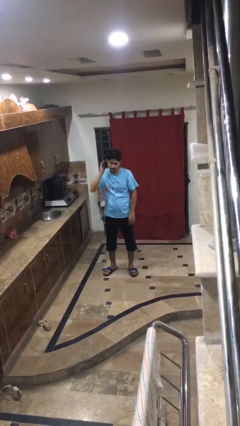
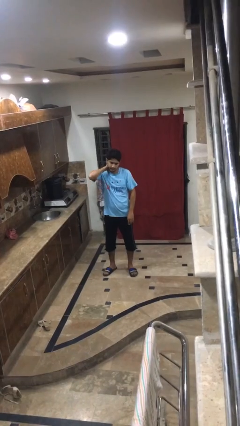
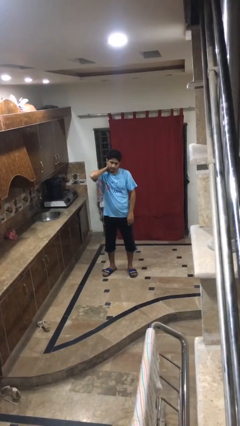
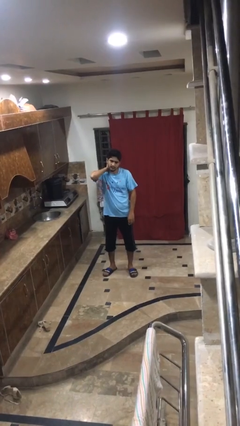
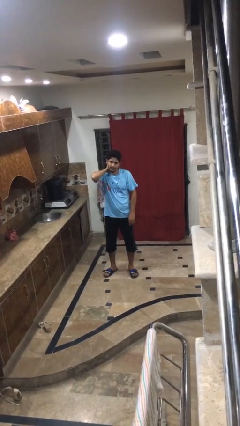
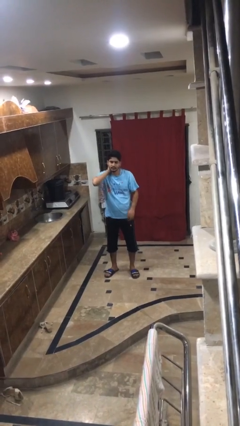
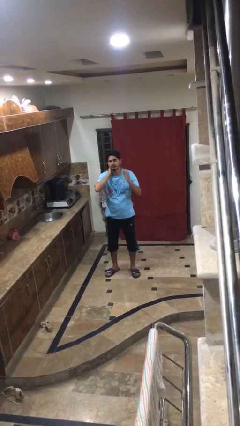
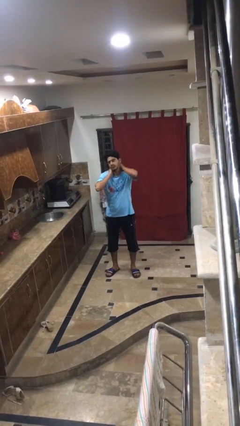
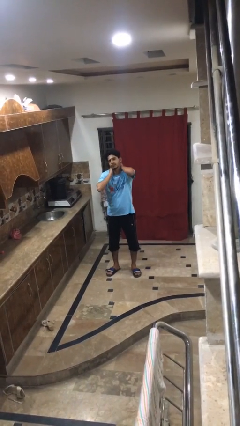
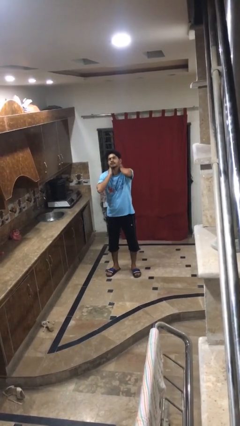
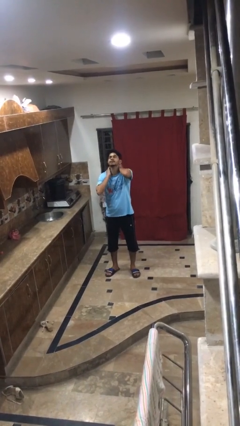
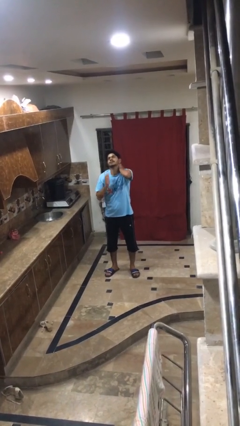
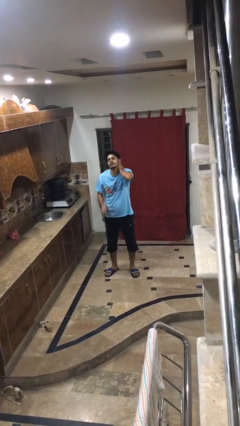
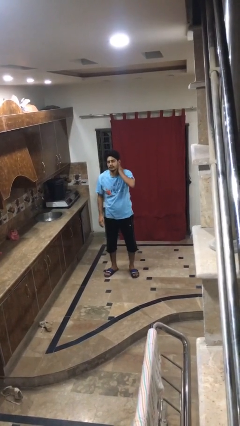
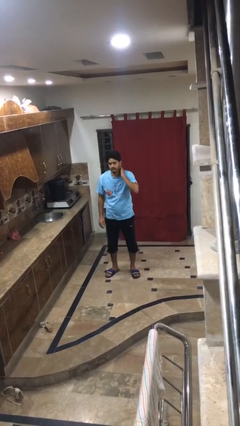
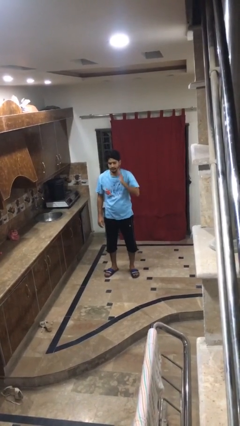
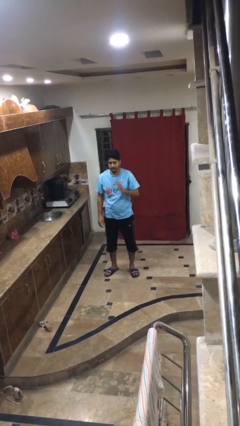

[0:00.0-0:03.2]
person rubs neck

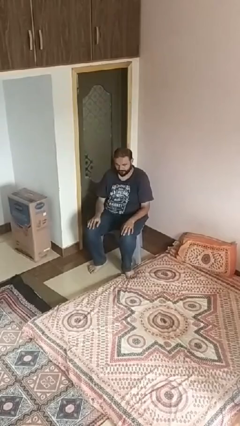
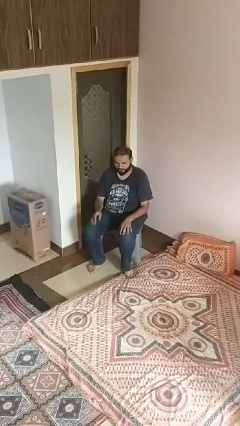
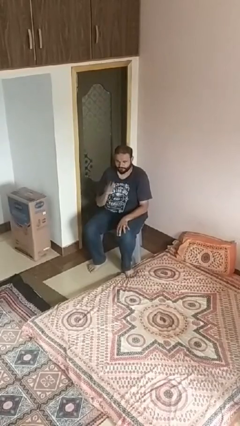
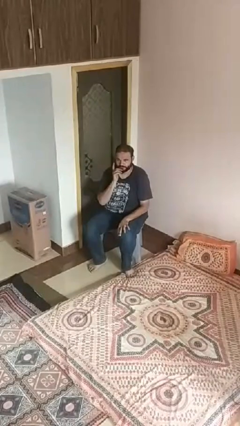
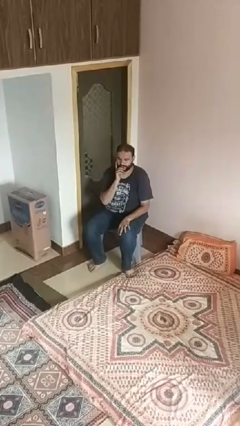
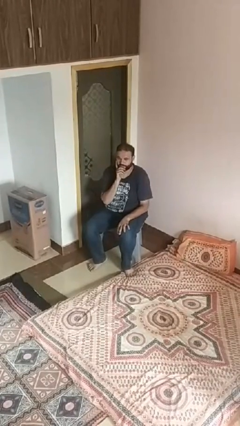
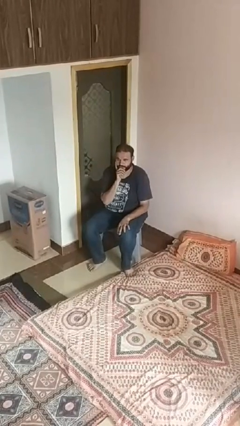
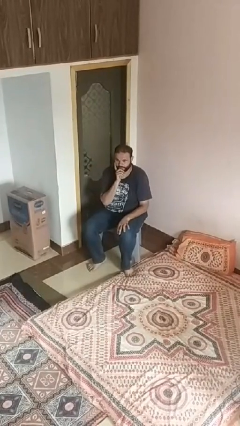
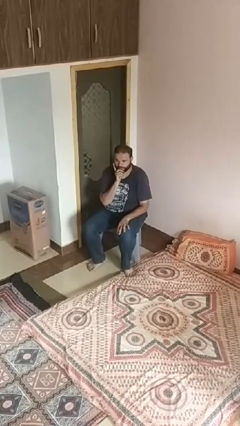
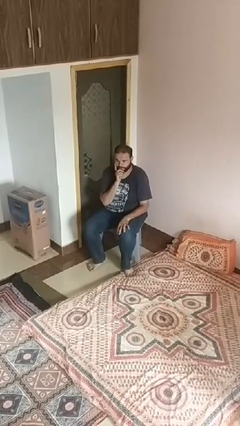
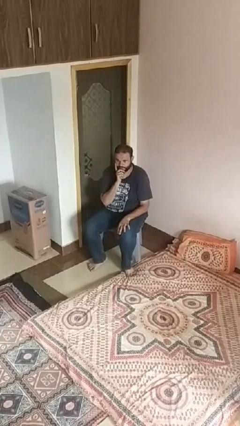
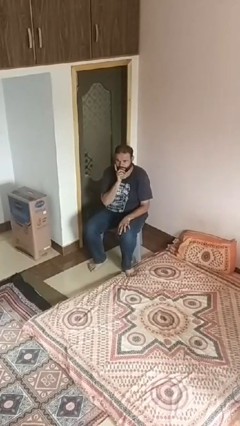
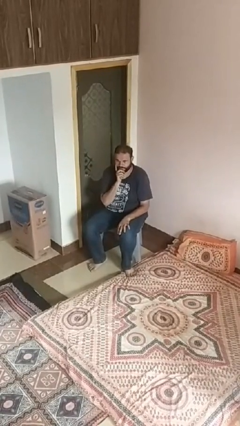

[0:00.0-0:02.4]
person strokes chin

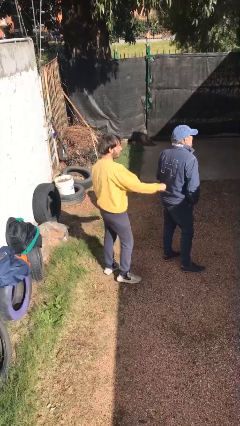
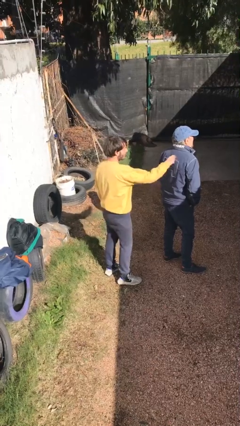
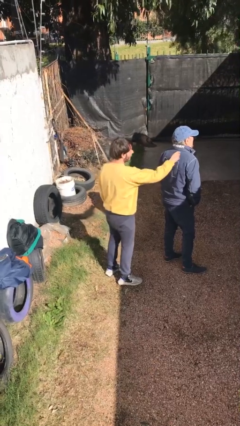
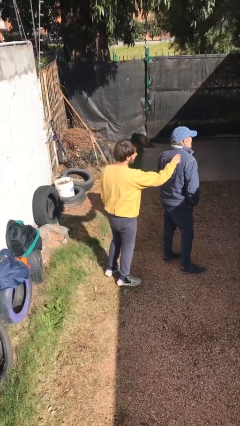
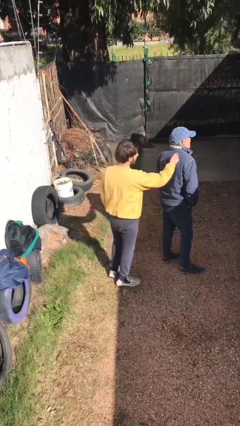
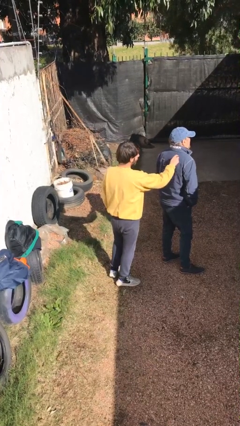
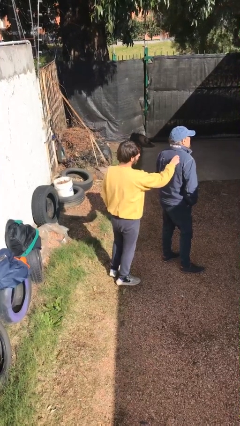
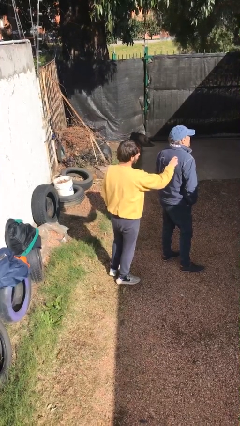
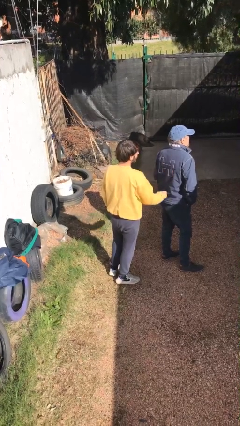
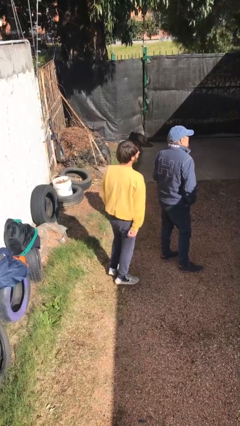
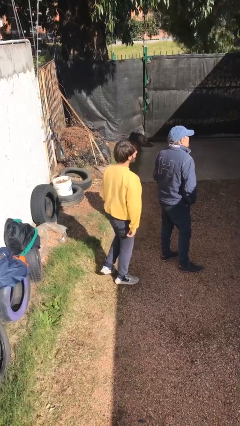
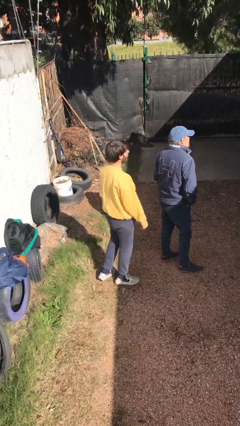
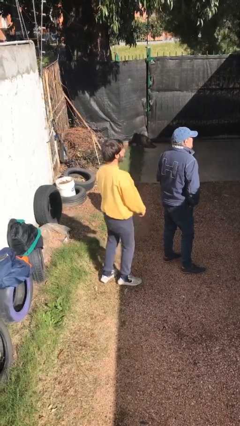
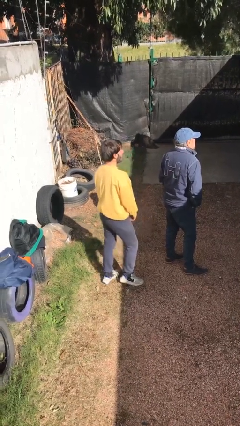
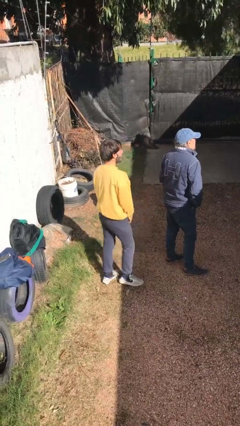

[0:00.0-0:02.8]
person touches back of person

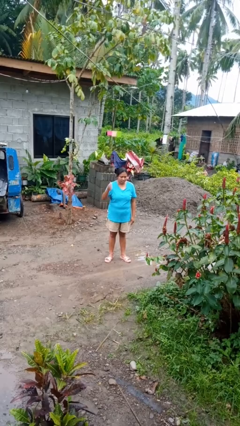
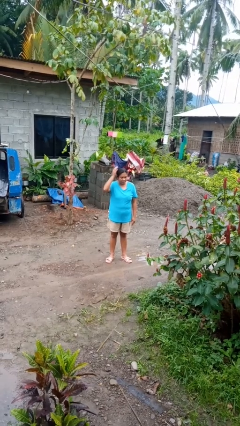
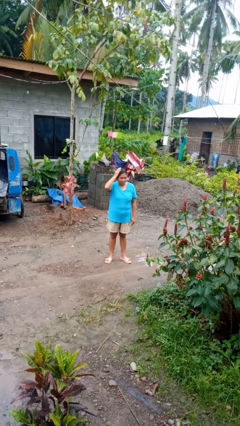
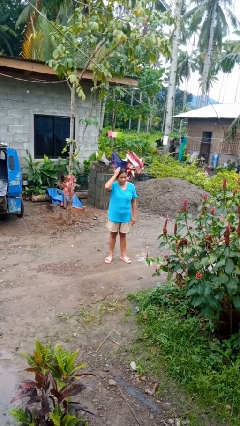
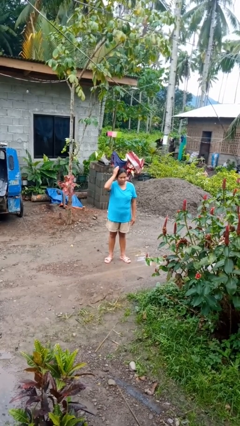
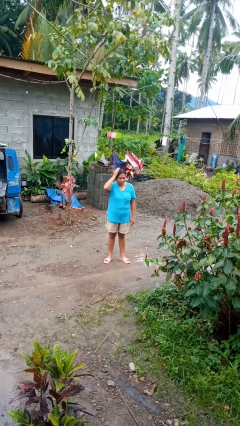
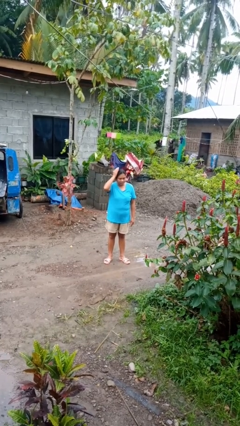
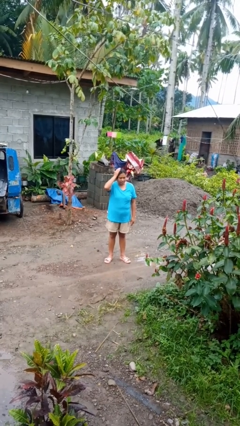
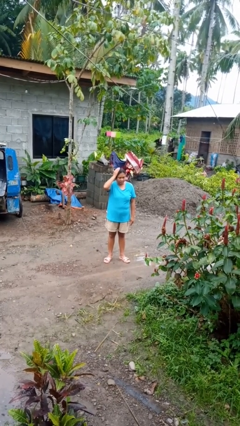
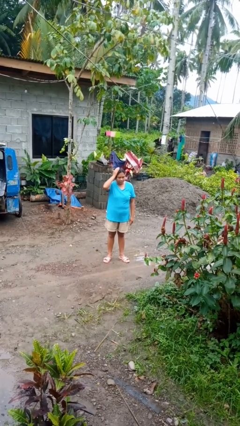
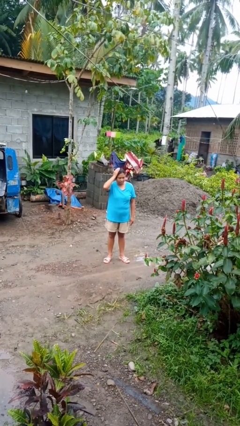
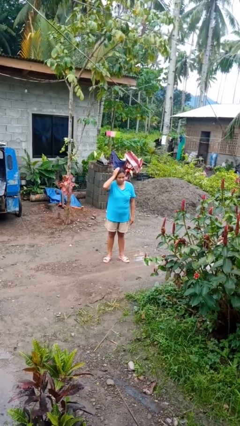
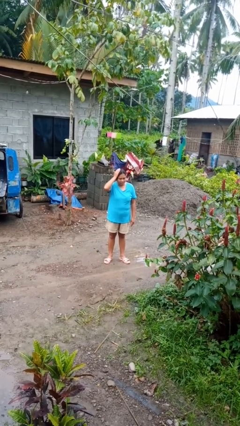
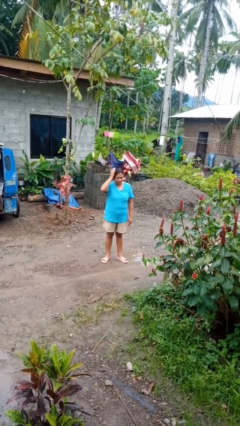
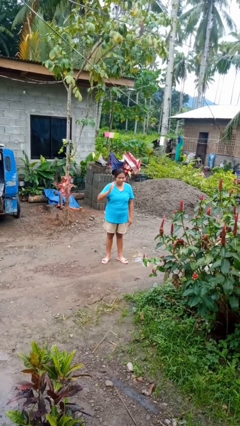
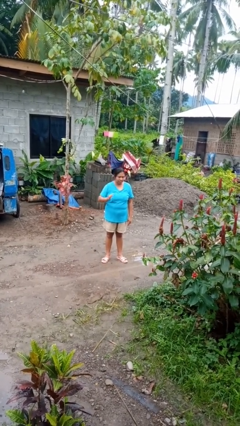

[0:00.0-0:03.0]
person pats head

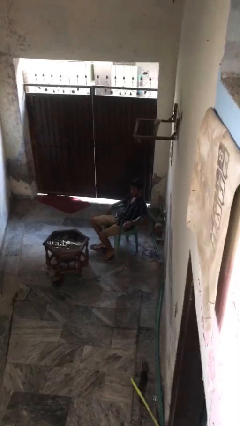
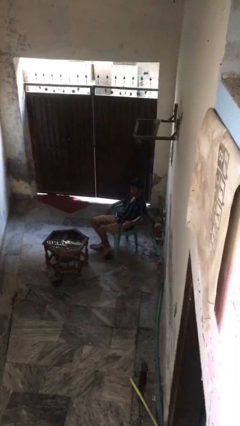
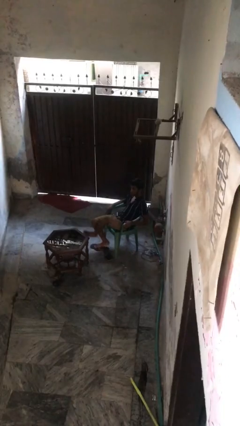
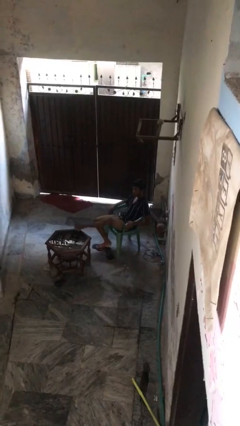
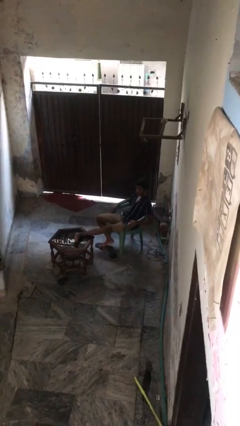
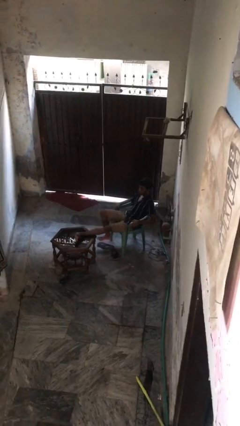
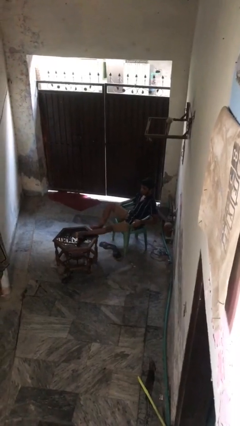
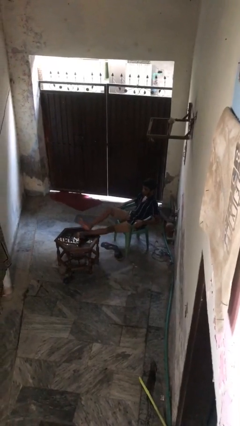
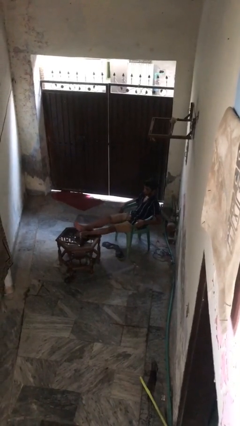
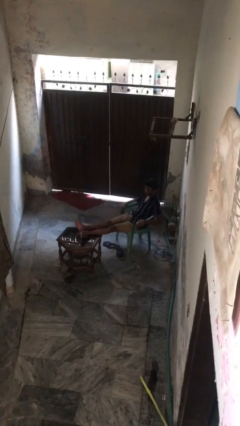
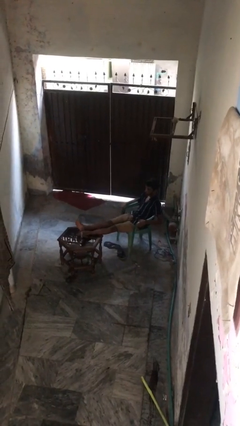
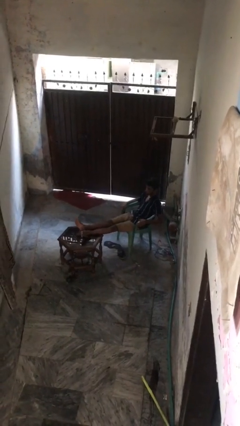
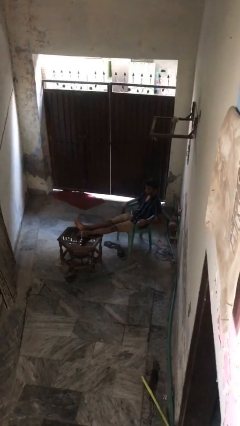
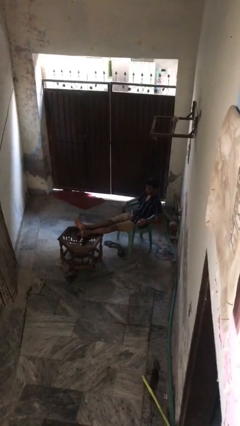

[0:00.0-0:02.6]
person puts feet up

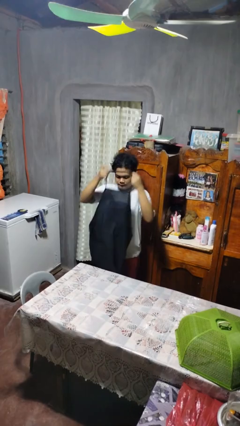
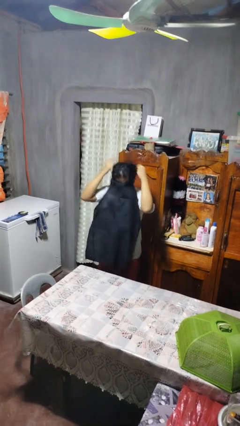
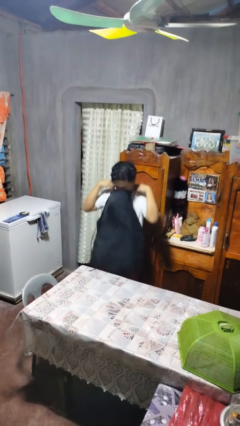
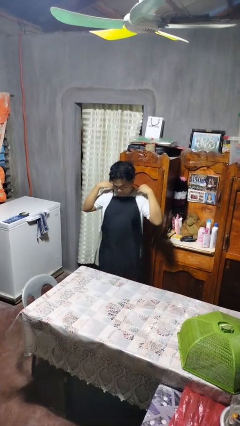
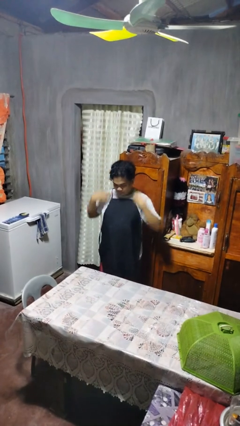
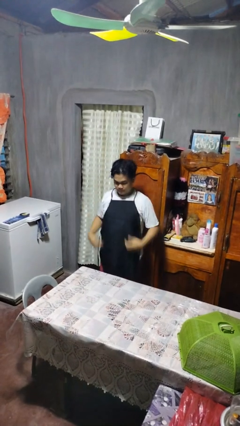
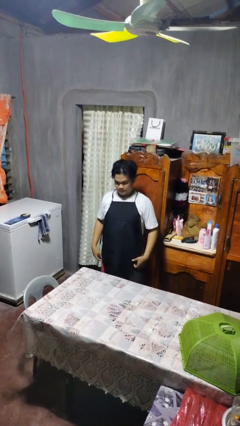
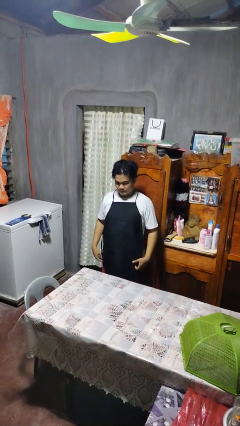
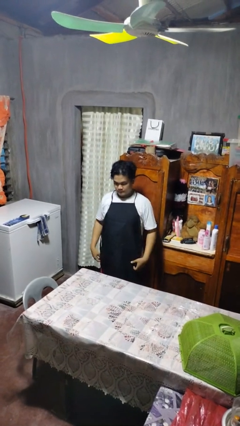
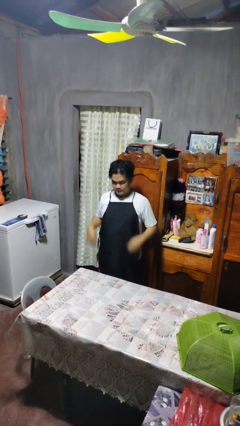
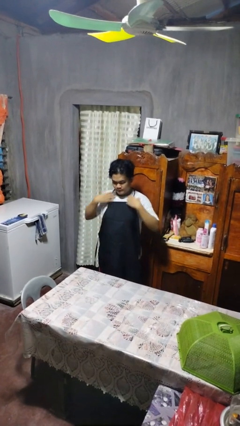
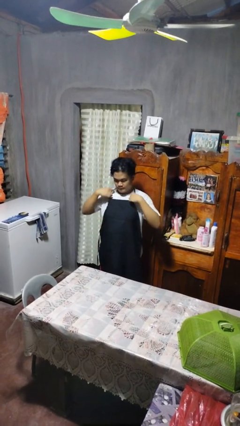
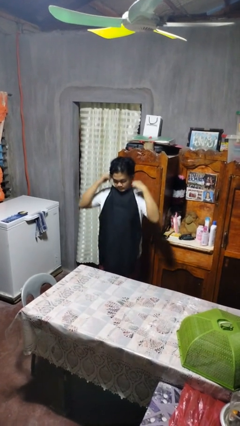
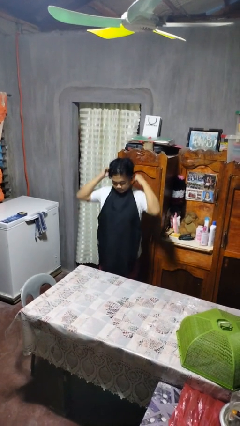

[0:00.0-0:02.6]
person puts on apron

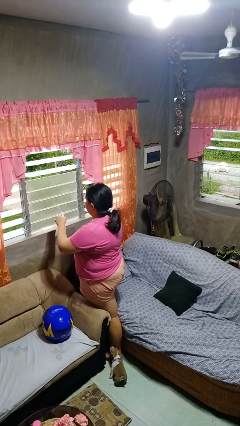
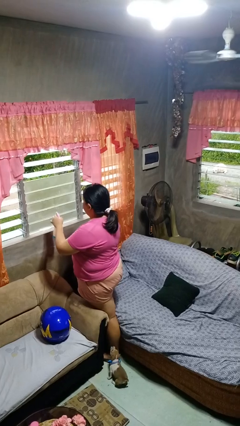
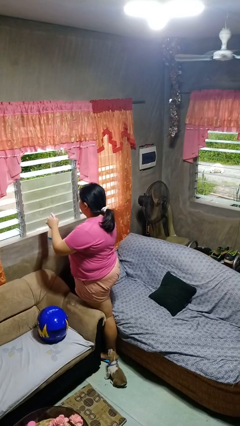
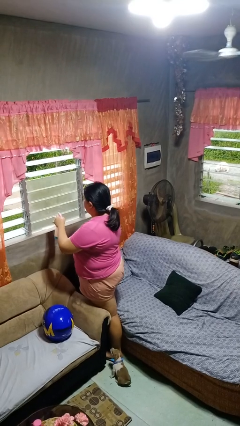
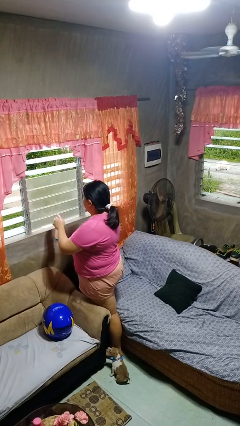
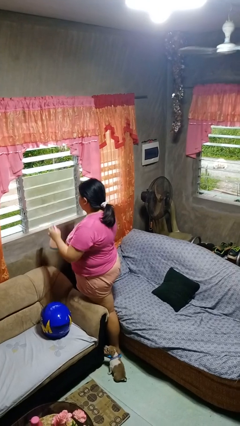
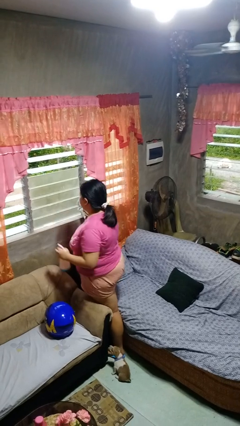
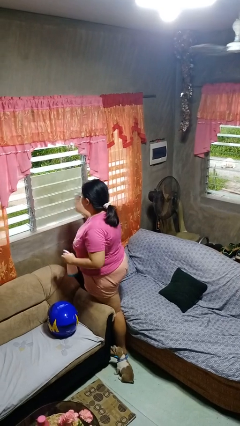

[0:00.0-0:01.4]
person sprays from bottle
